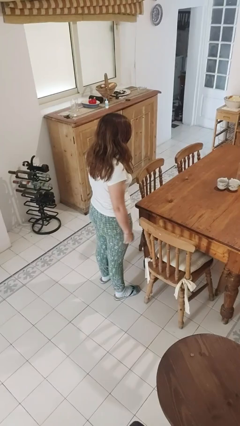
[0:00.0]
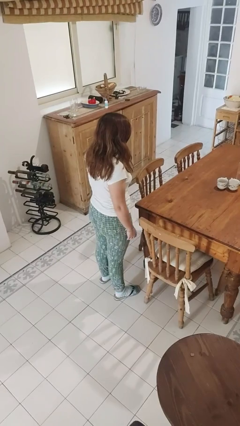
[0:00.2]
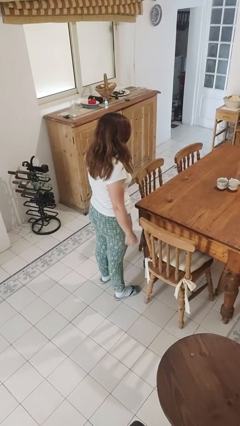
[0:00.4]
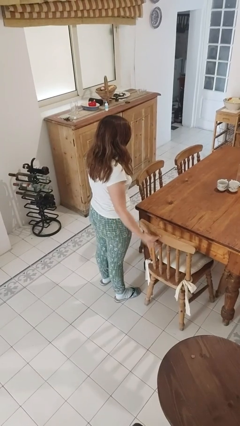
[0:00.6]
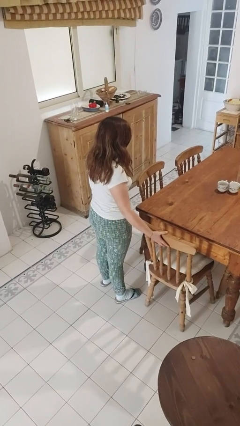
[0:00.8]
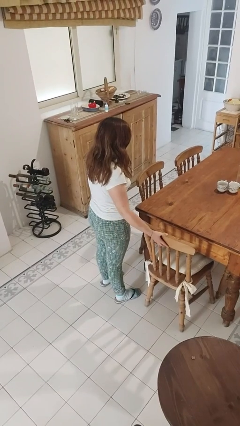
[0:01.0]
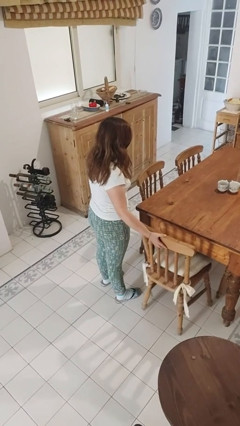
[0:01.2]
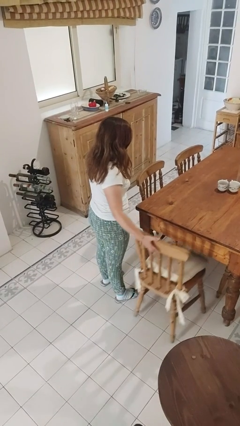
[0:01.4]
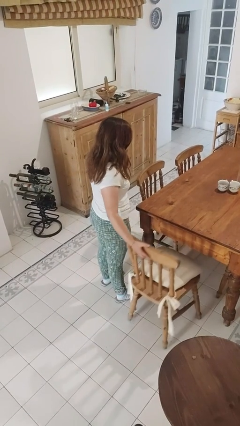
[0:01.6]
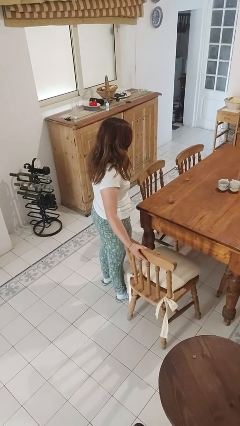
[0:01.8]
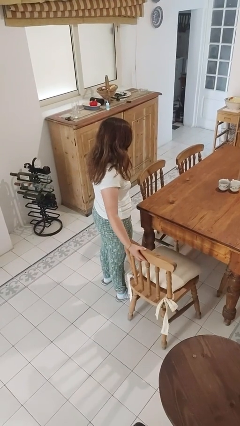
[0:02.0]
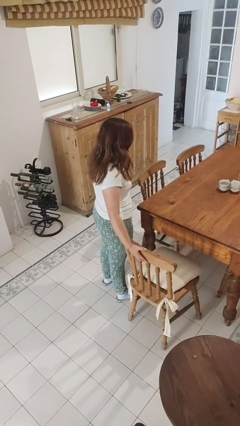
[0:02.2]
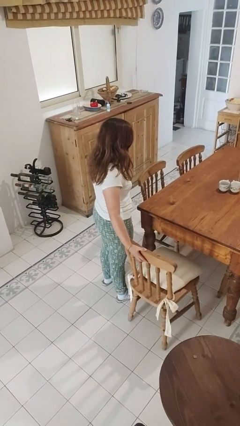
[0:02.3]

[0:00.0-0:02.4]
person pulls out chair

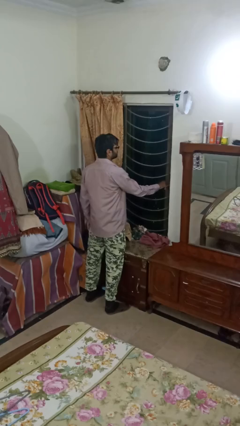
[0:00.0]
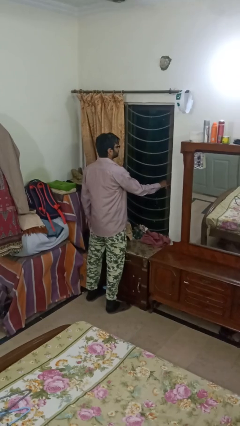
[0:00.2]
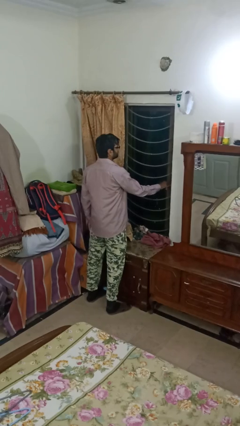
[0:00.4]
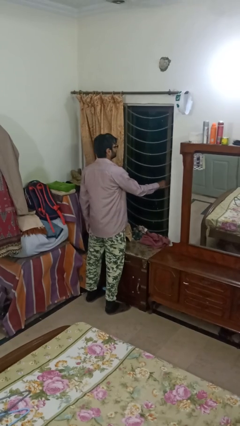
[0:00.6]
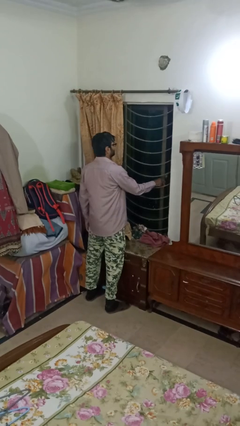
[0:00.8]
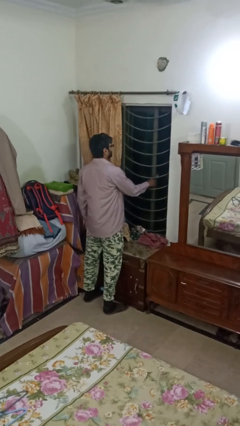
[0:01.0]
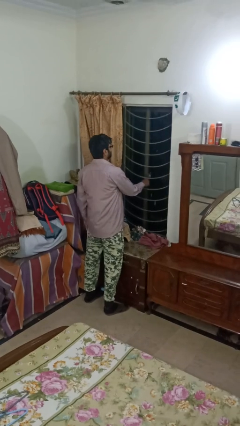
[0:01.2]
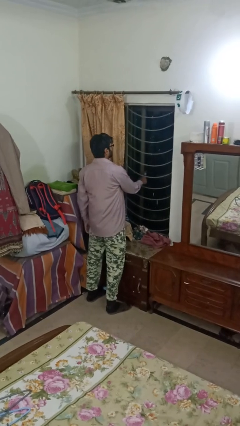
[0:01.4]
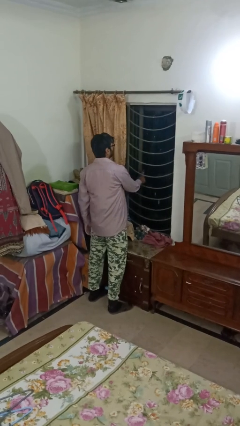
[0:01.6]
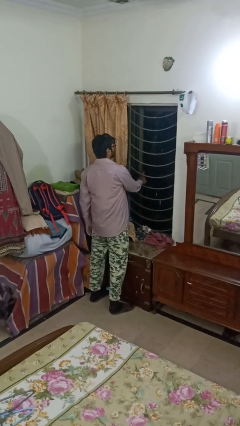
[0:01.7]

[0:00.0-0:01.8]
person opens home window

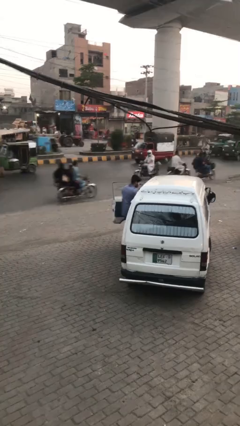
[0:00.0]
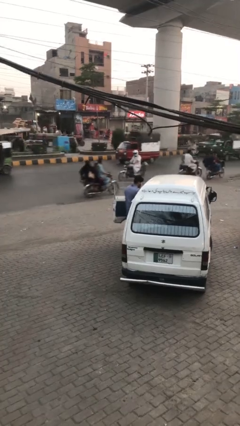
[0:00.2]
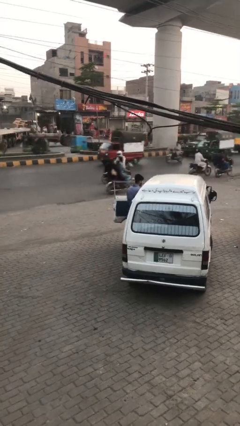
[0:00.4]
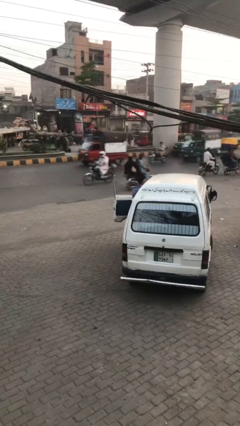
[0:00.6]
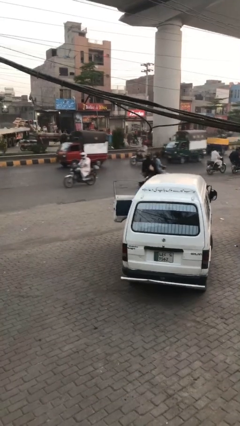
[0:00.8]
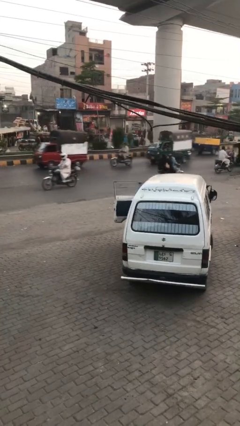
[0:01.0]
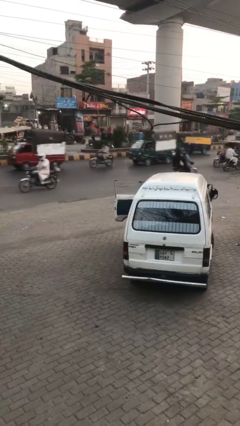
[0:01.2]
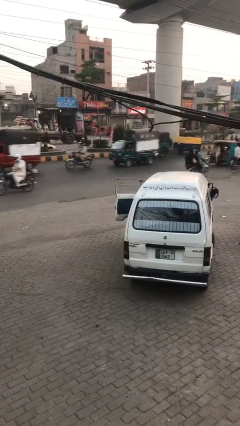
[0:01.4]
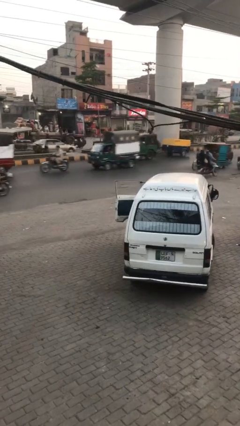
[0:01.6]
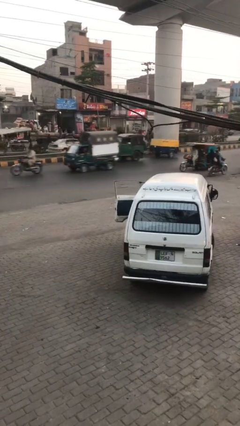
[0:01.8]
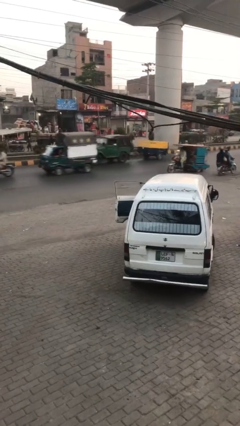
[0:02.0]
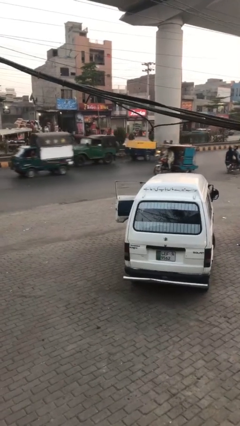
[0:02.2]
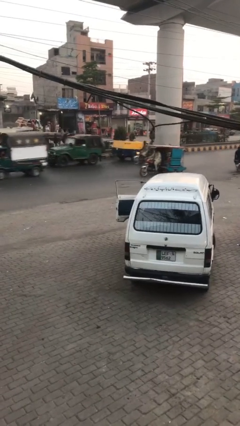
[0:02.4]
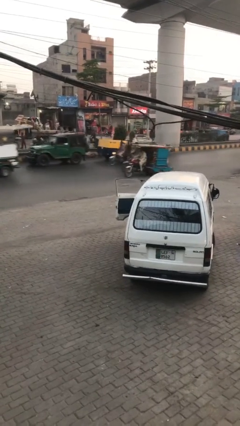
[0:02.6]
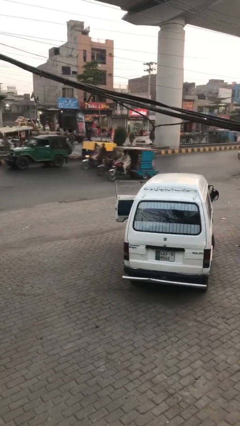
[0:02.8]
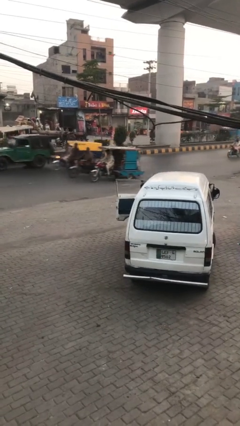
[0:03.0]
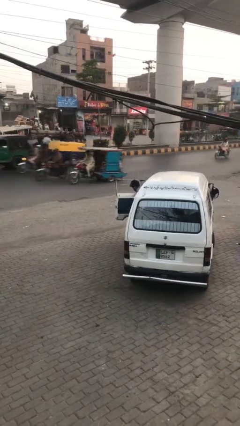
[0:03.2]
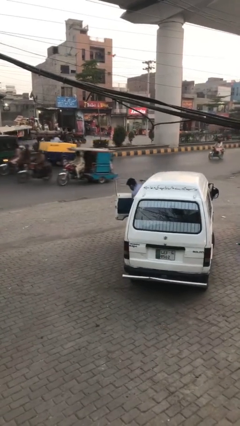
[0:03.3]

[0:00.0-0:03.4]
person enters car

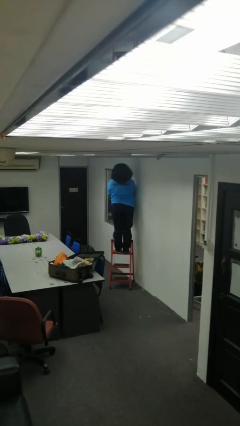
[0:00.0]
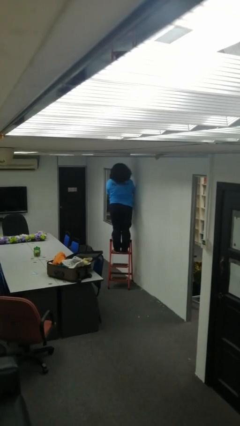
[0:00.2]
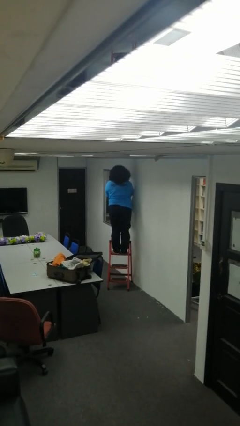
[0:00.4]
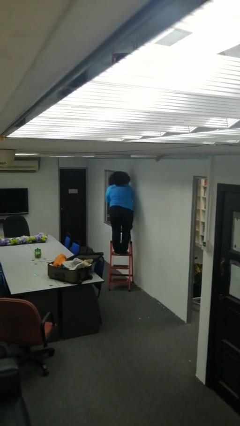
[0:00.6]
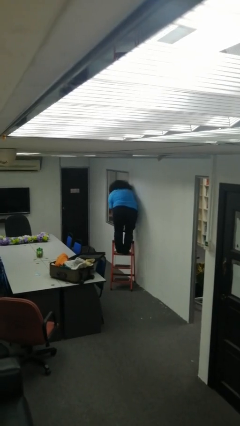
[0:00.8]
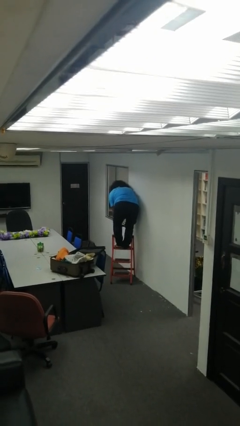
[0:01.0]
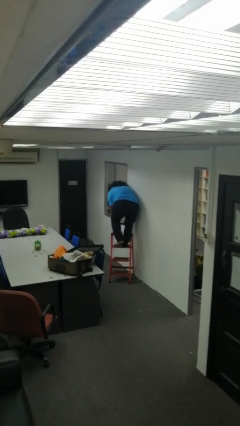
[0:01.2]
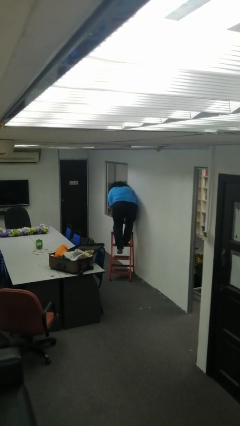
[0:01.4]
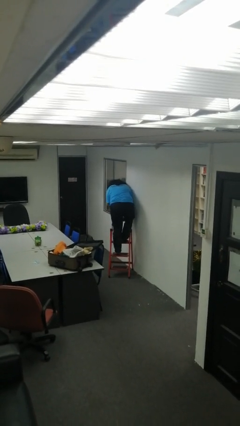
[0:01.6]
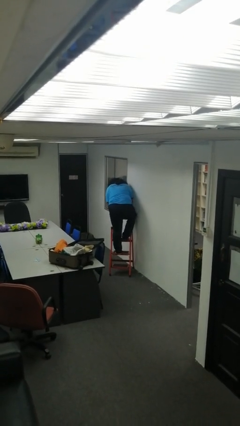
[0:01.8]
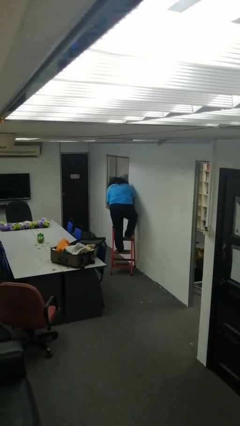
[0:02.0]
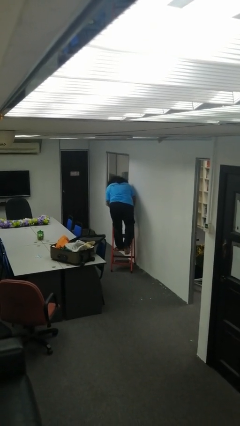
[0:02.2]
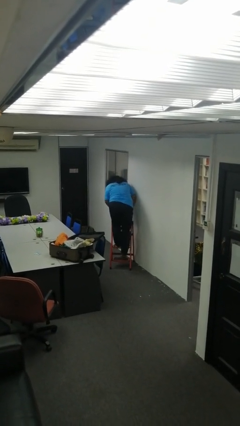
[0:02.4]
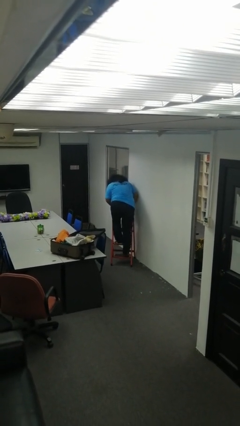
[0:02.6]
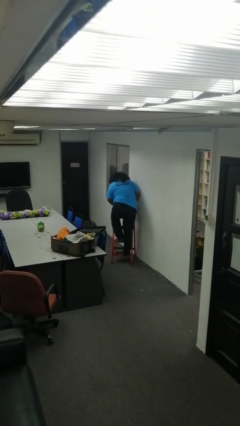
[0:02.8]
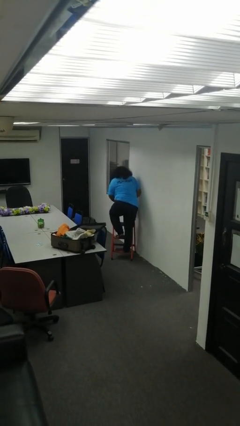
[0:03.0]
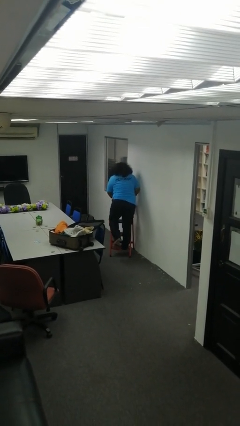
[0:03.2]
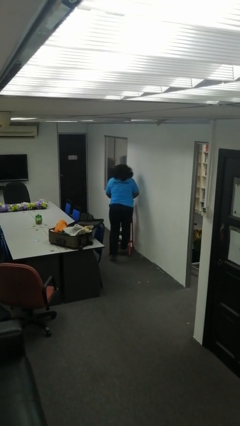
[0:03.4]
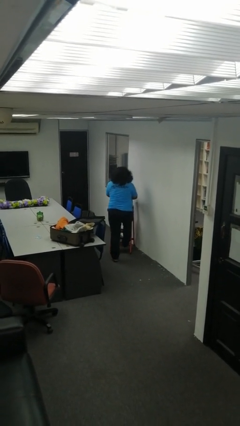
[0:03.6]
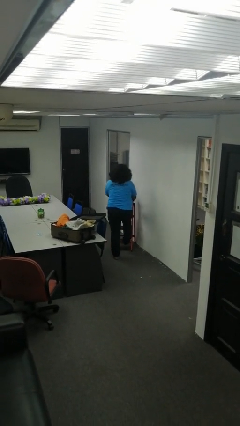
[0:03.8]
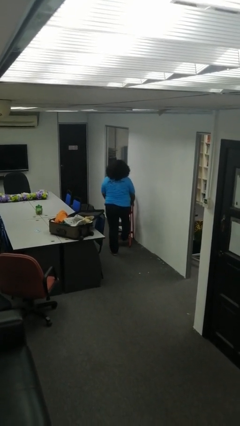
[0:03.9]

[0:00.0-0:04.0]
person climbs down ladder

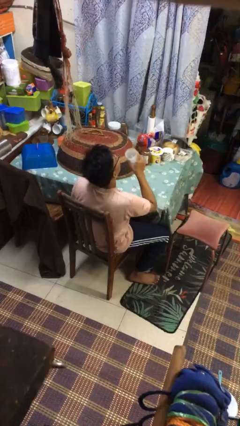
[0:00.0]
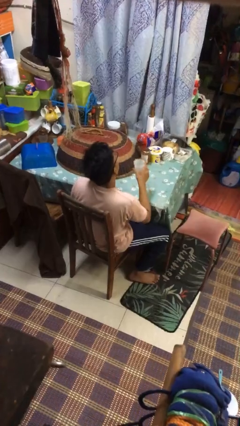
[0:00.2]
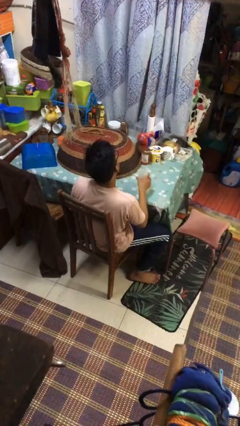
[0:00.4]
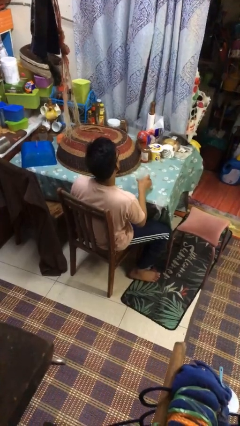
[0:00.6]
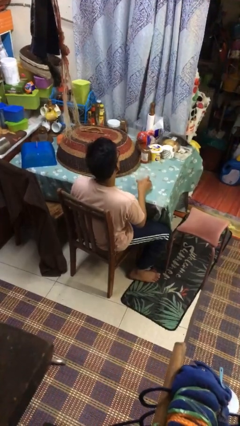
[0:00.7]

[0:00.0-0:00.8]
person puts down object on table

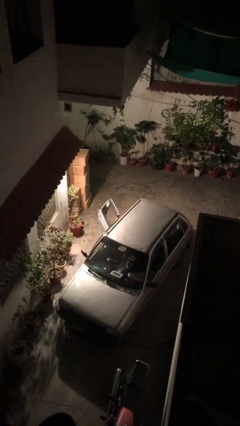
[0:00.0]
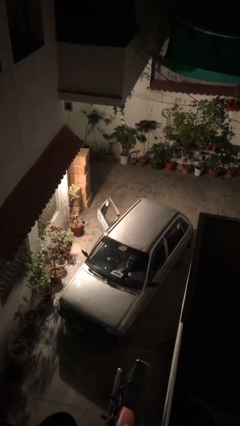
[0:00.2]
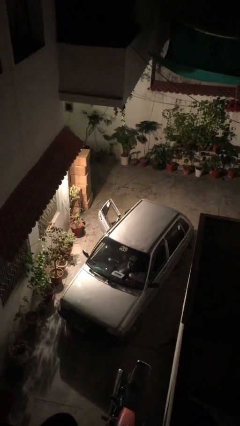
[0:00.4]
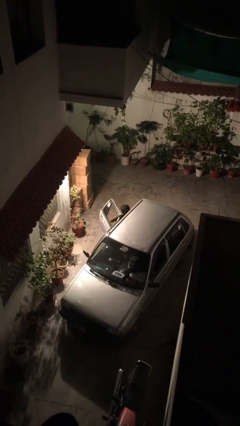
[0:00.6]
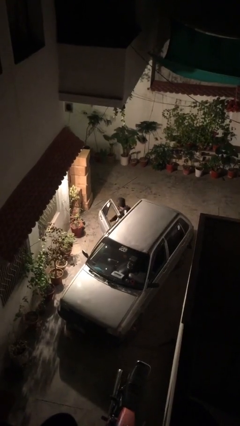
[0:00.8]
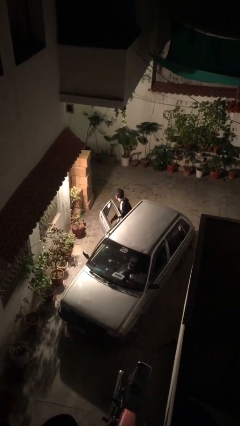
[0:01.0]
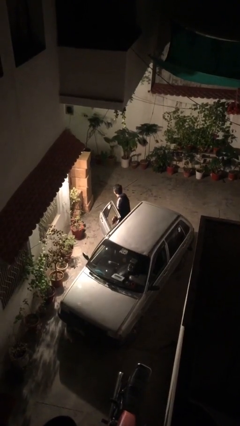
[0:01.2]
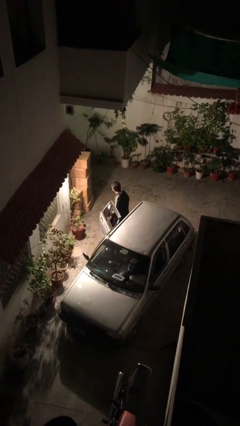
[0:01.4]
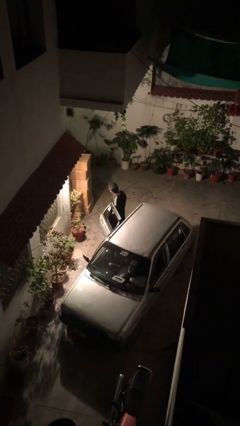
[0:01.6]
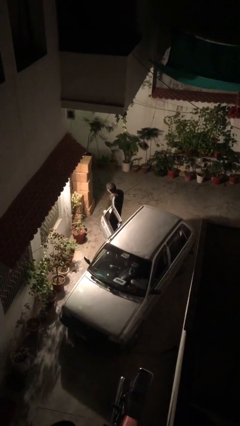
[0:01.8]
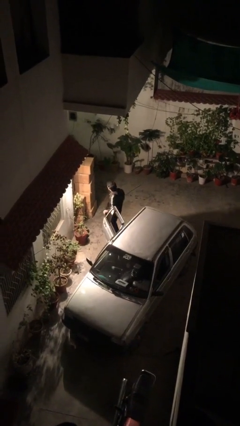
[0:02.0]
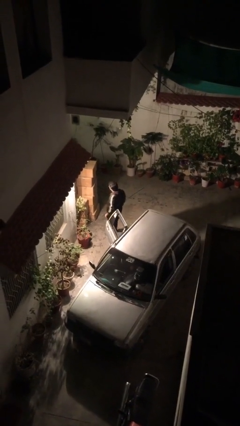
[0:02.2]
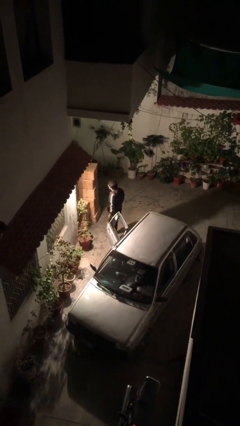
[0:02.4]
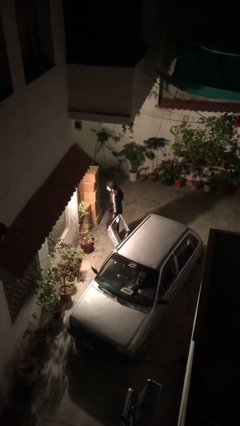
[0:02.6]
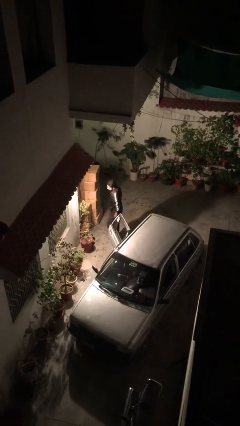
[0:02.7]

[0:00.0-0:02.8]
person exits car

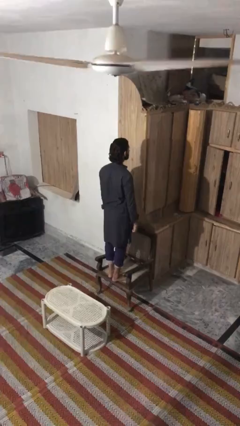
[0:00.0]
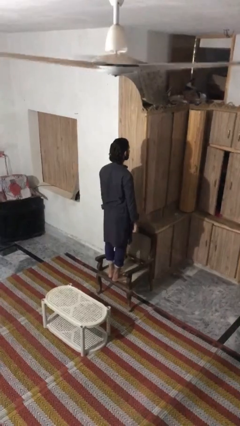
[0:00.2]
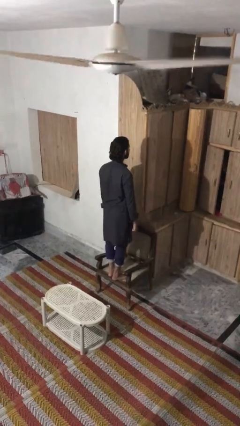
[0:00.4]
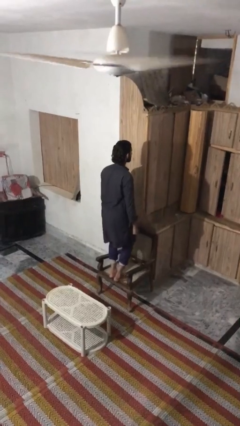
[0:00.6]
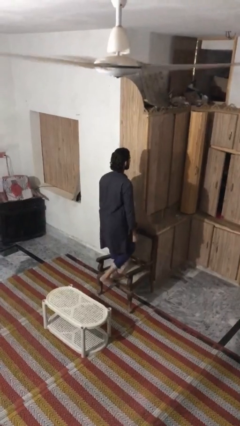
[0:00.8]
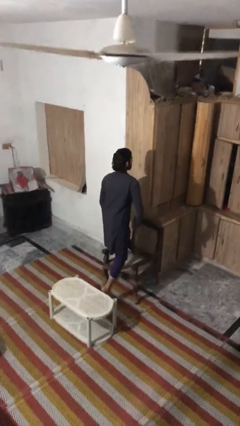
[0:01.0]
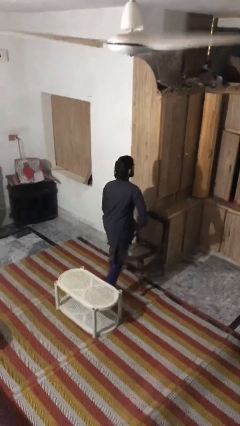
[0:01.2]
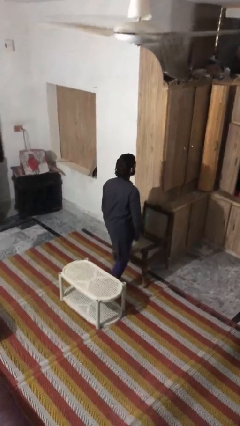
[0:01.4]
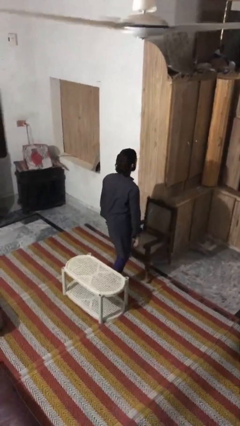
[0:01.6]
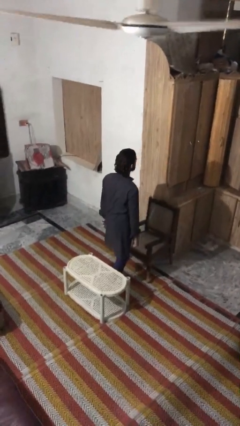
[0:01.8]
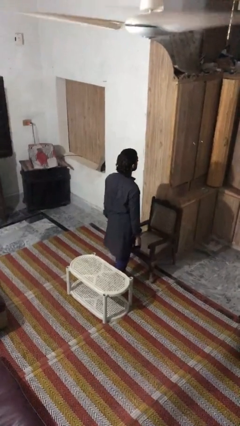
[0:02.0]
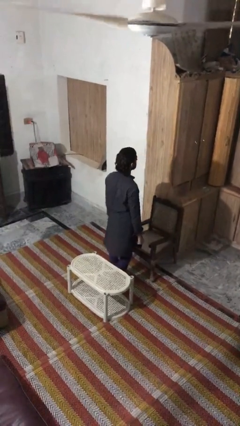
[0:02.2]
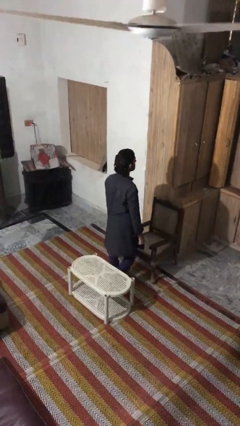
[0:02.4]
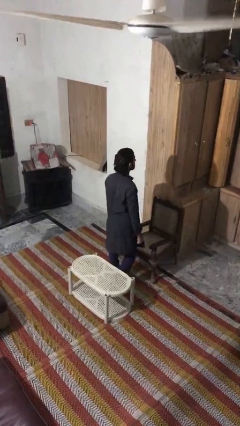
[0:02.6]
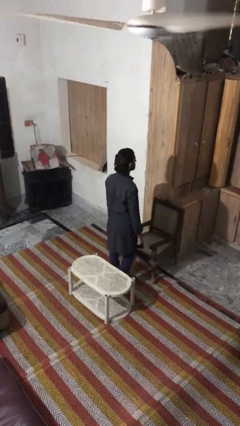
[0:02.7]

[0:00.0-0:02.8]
person climbs off chair
